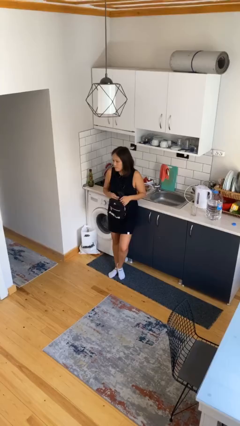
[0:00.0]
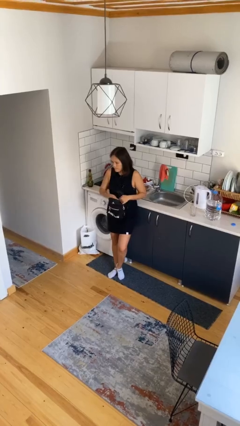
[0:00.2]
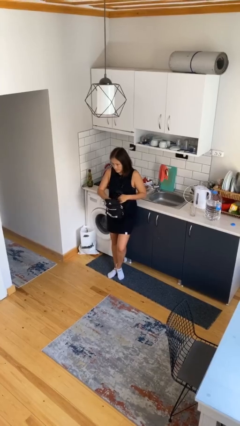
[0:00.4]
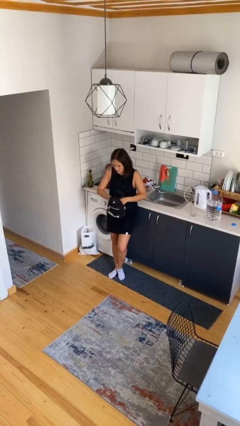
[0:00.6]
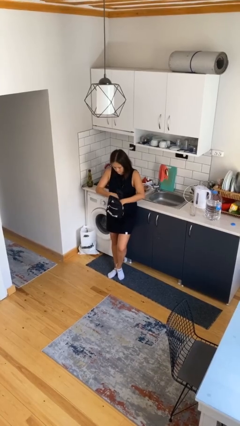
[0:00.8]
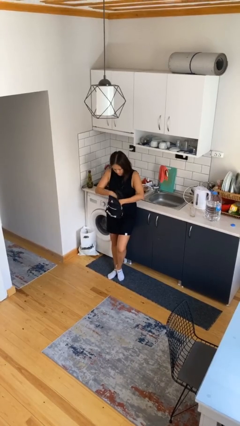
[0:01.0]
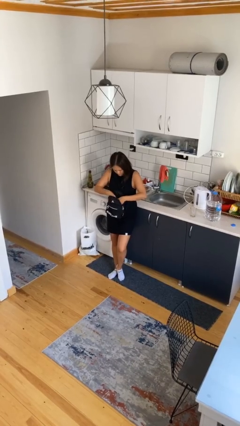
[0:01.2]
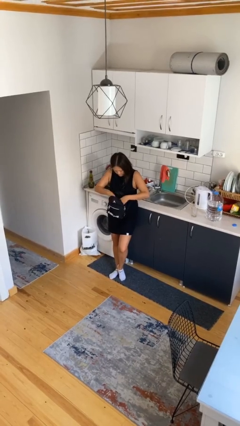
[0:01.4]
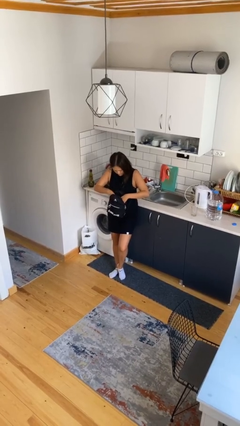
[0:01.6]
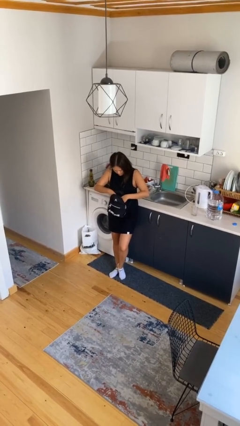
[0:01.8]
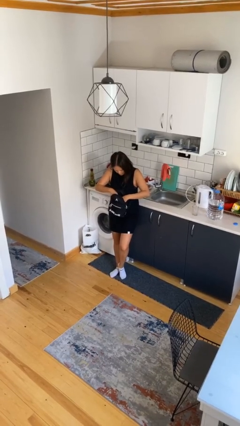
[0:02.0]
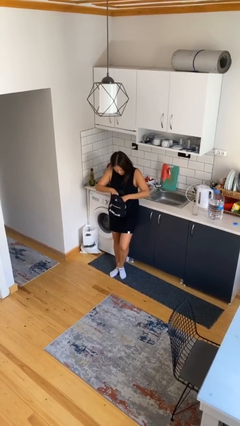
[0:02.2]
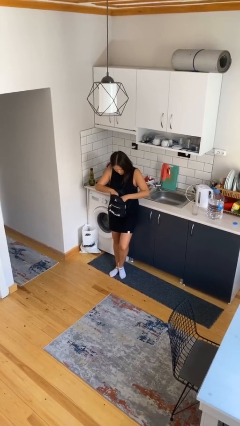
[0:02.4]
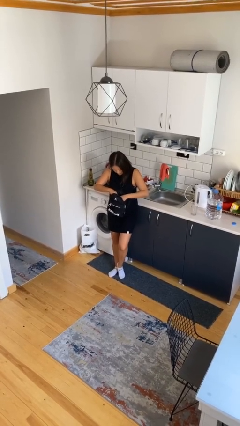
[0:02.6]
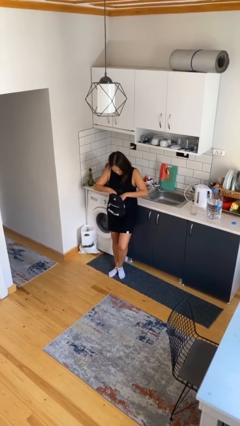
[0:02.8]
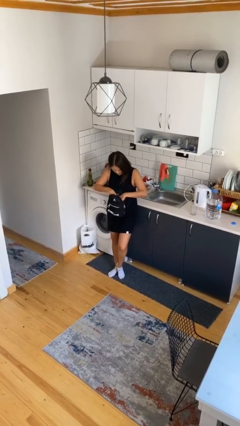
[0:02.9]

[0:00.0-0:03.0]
person searches in backpack

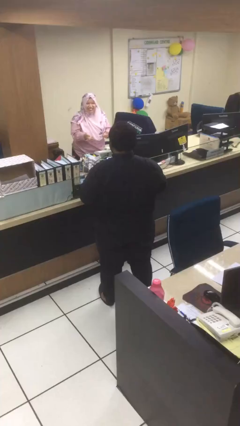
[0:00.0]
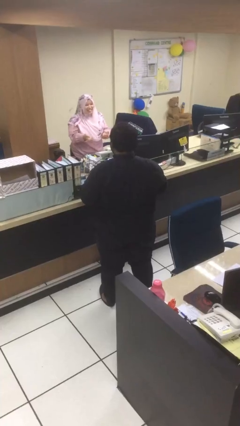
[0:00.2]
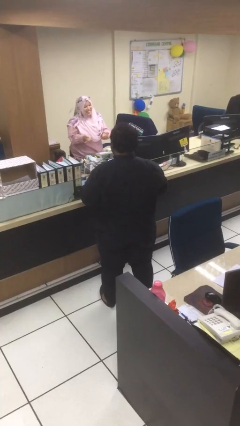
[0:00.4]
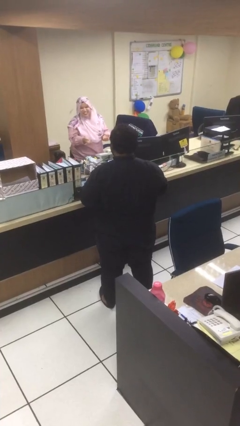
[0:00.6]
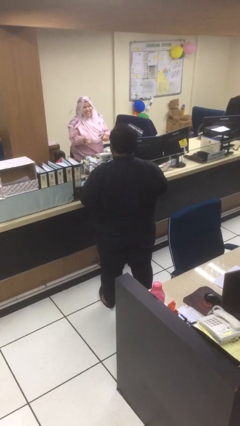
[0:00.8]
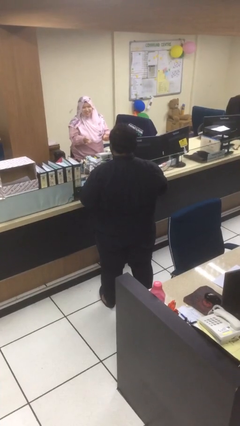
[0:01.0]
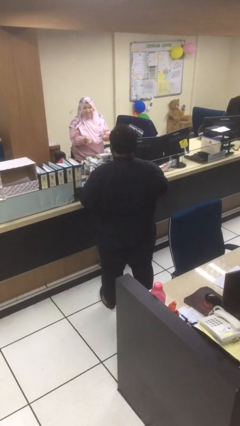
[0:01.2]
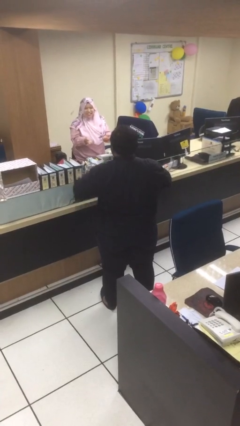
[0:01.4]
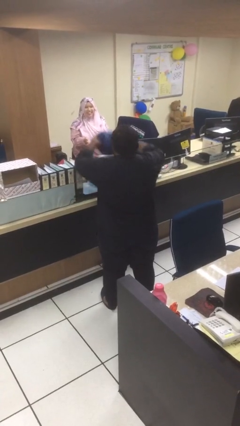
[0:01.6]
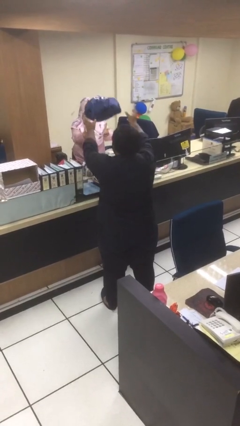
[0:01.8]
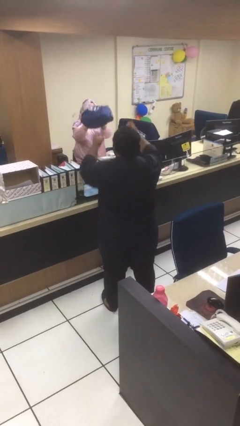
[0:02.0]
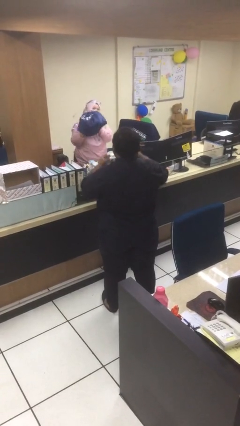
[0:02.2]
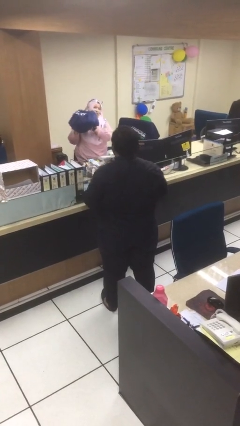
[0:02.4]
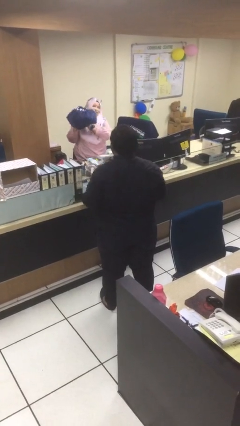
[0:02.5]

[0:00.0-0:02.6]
person throws object to person

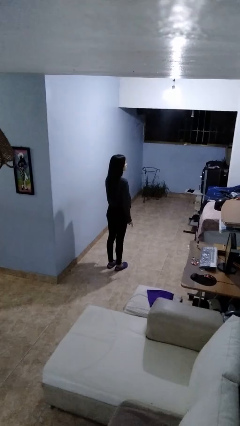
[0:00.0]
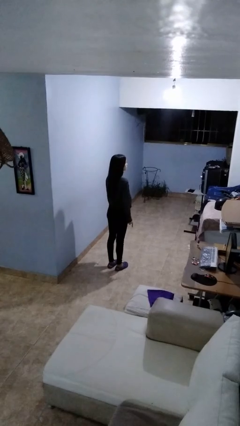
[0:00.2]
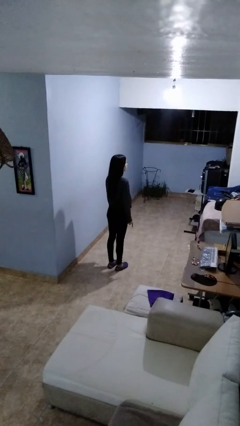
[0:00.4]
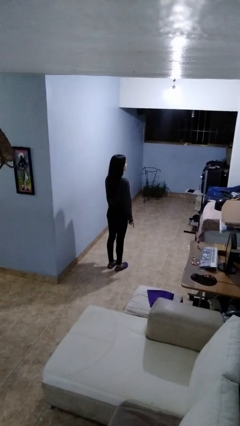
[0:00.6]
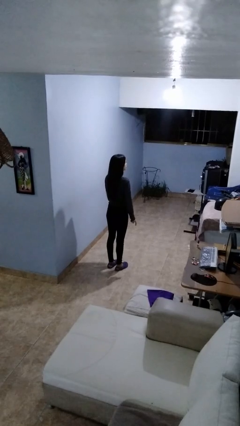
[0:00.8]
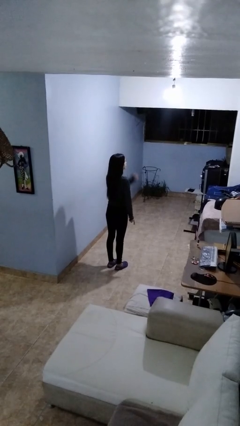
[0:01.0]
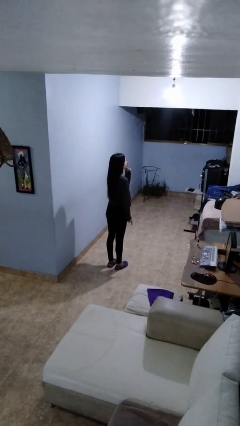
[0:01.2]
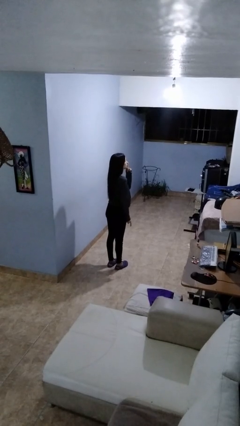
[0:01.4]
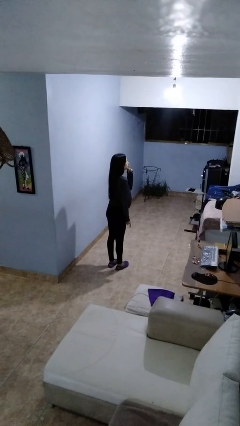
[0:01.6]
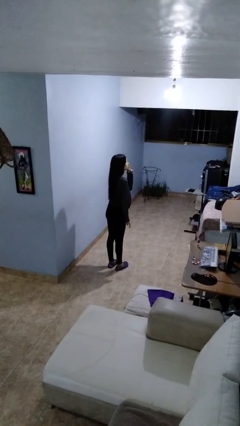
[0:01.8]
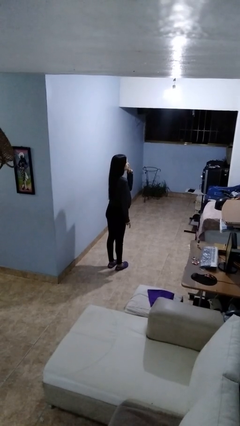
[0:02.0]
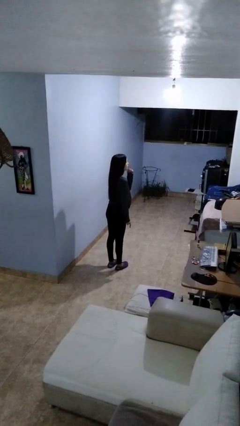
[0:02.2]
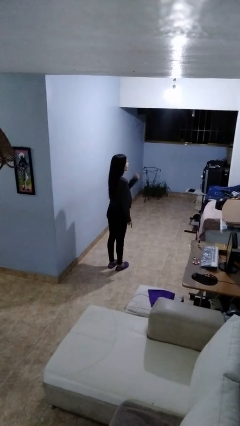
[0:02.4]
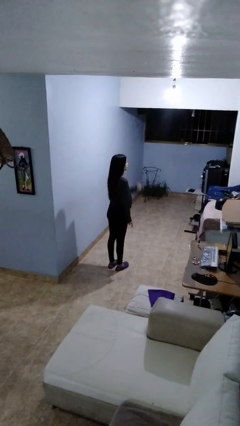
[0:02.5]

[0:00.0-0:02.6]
person gestures be quiet

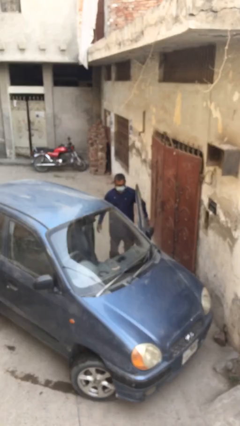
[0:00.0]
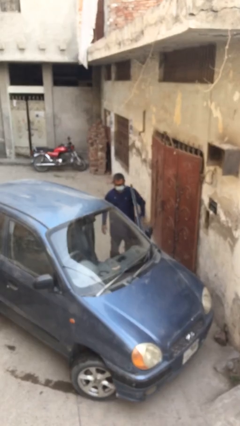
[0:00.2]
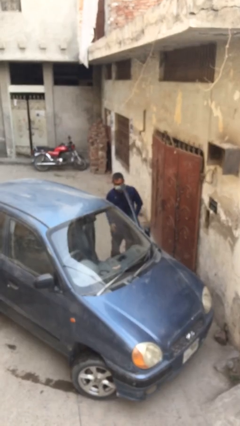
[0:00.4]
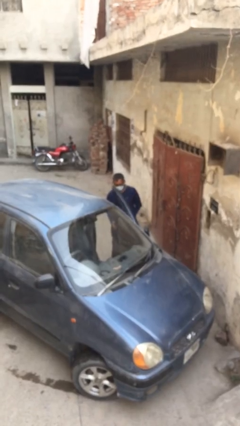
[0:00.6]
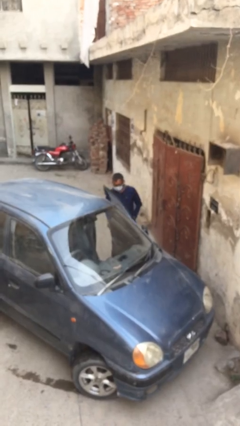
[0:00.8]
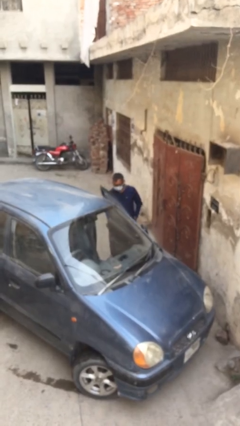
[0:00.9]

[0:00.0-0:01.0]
person closes car door

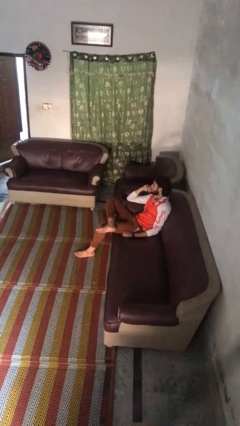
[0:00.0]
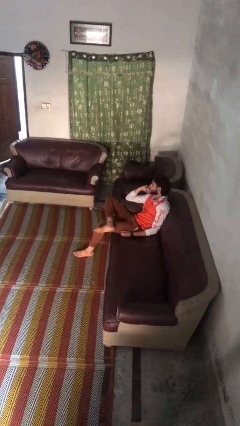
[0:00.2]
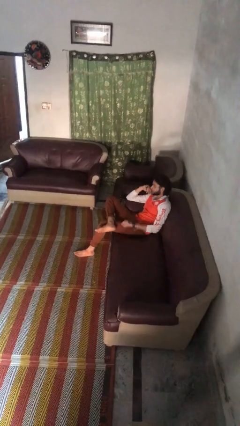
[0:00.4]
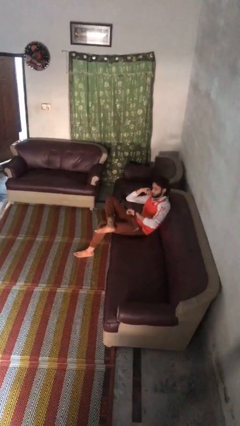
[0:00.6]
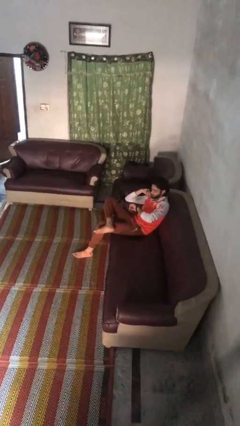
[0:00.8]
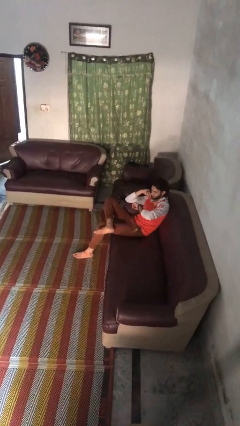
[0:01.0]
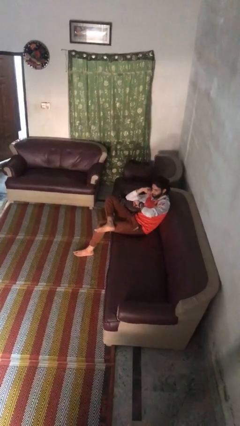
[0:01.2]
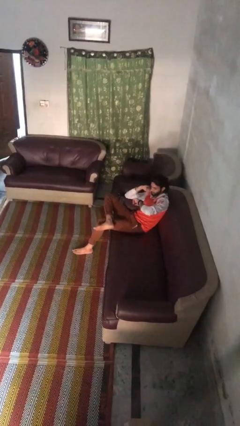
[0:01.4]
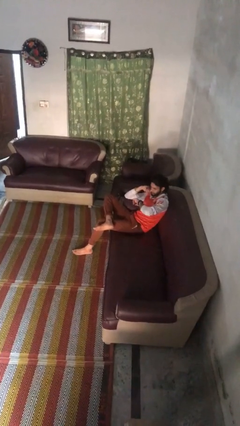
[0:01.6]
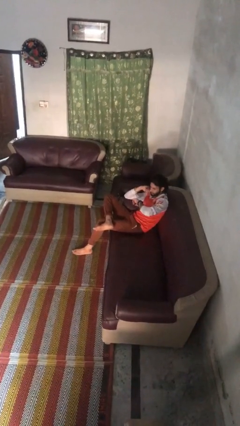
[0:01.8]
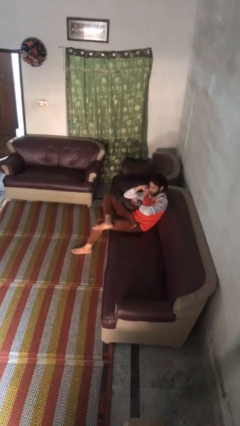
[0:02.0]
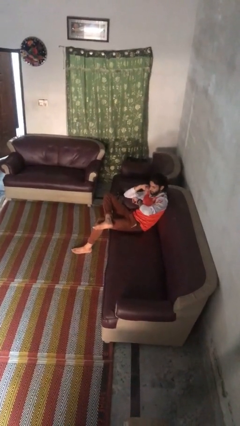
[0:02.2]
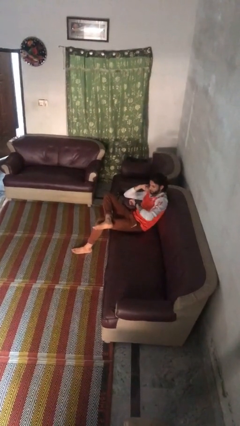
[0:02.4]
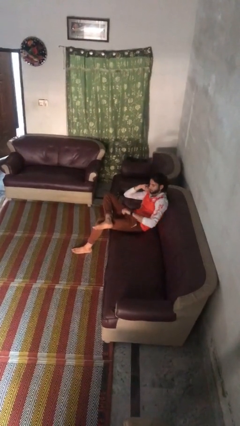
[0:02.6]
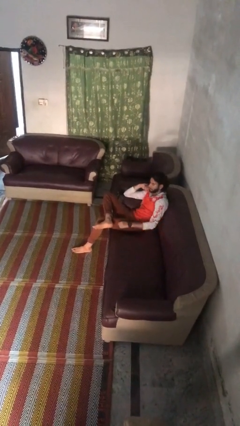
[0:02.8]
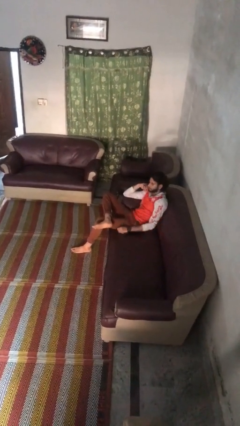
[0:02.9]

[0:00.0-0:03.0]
person looks at wristwatch

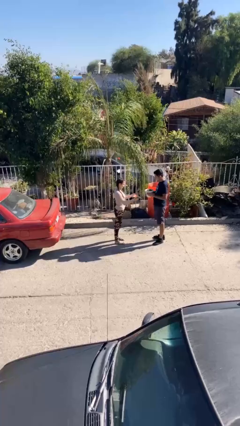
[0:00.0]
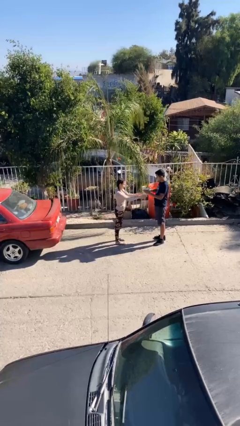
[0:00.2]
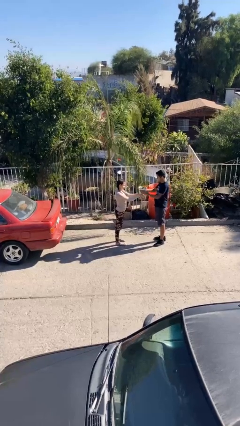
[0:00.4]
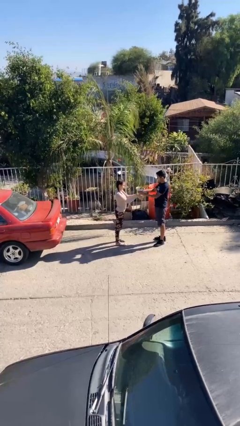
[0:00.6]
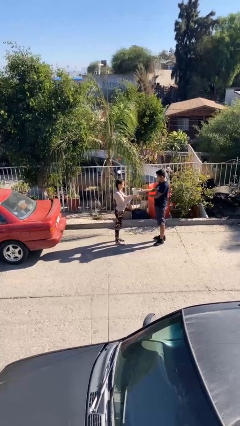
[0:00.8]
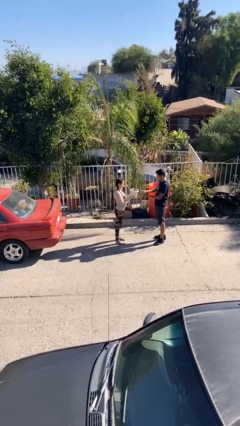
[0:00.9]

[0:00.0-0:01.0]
person transfers object to person

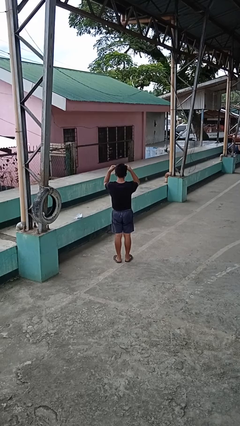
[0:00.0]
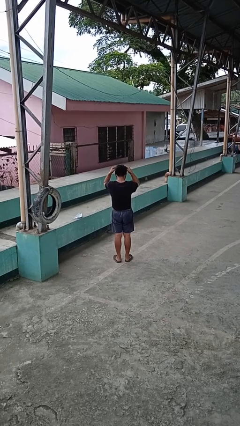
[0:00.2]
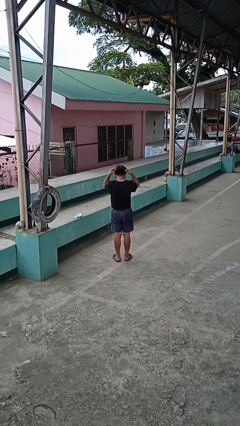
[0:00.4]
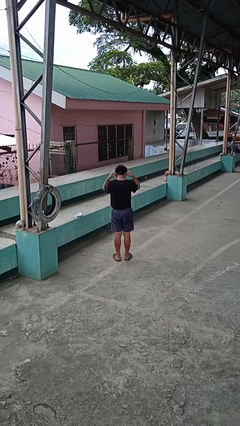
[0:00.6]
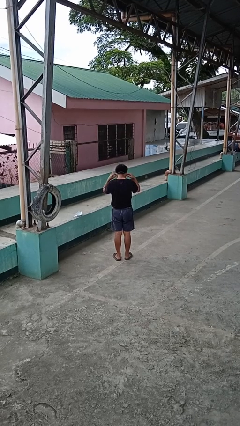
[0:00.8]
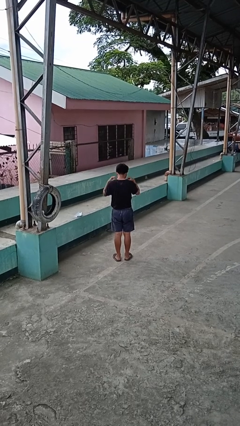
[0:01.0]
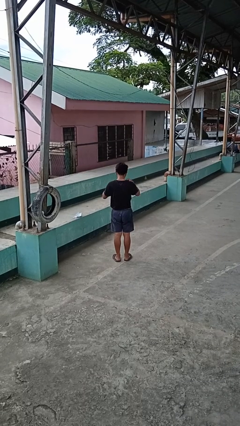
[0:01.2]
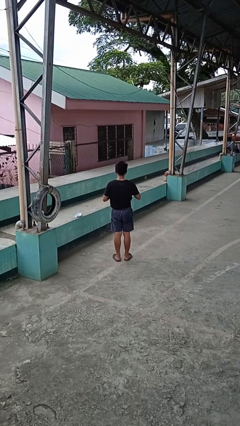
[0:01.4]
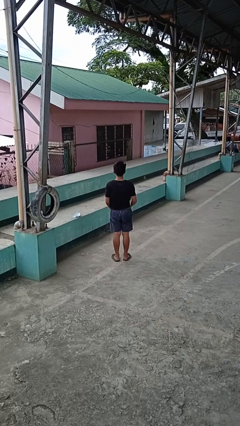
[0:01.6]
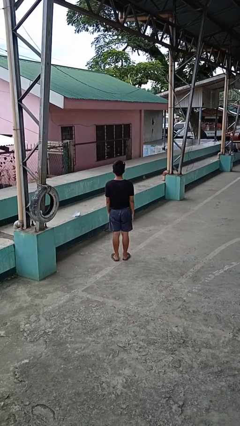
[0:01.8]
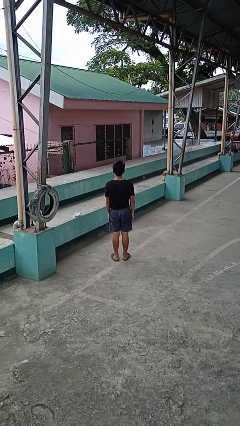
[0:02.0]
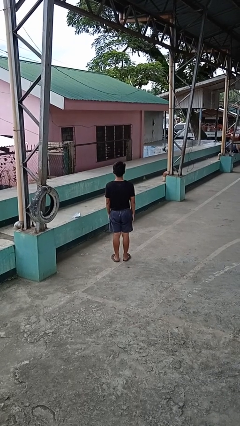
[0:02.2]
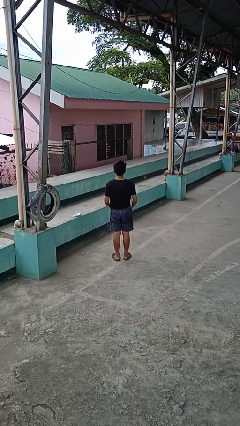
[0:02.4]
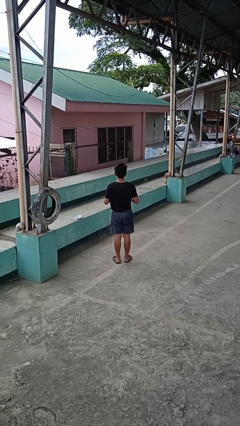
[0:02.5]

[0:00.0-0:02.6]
person puts on necklace

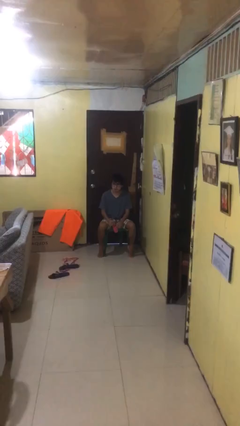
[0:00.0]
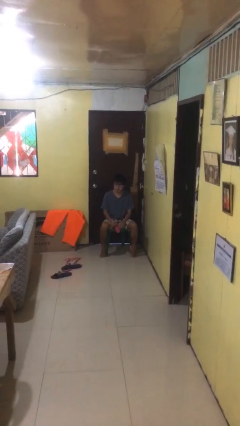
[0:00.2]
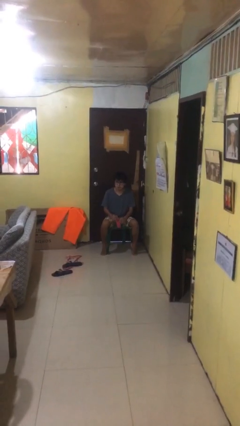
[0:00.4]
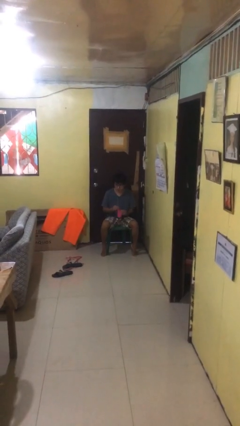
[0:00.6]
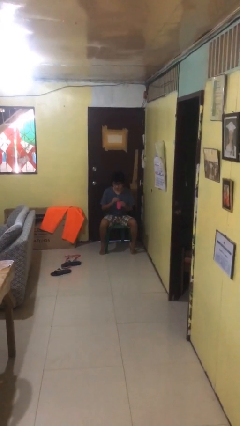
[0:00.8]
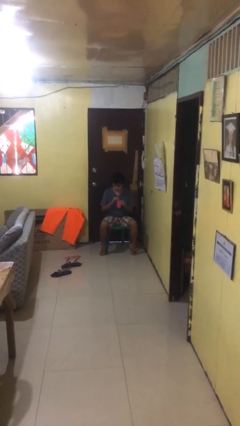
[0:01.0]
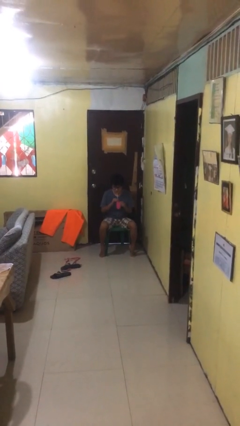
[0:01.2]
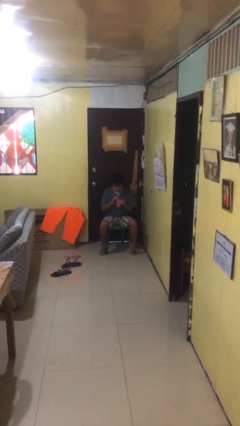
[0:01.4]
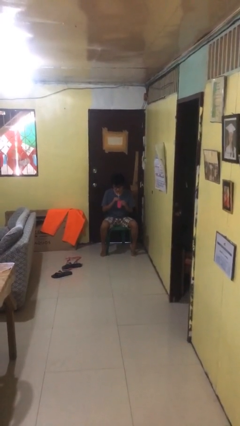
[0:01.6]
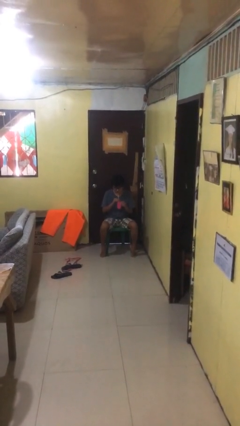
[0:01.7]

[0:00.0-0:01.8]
person drinks from straw
